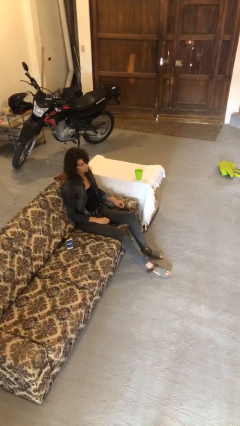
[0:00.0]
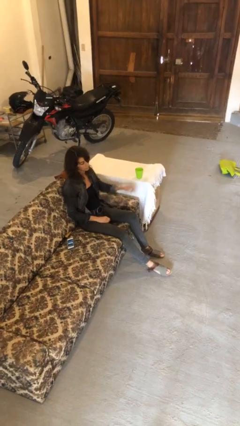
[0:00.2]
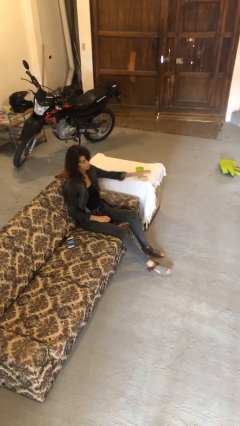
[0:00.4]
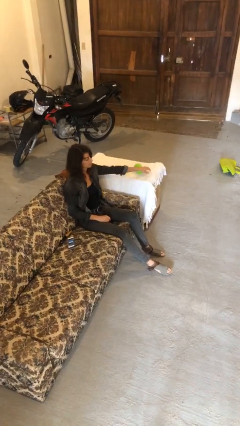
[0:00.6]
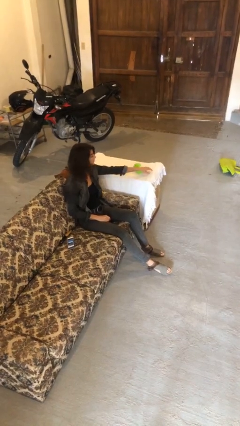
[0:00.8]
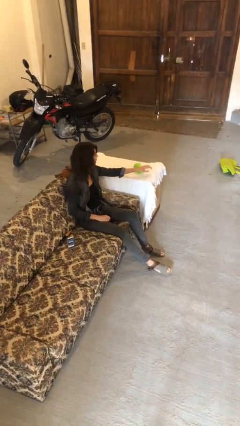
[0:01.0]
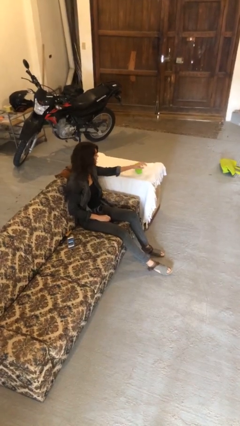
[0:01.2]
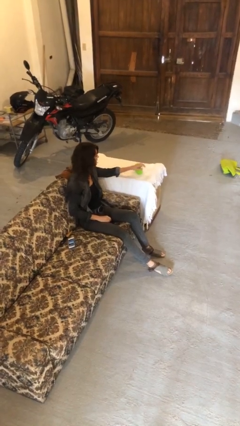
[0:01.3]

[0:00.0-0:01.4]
person knocks over glass

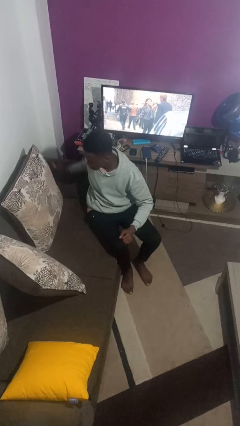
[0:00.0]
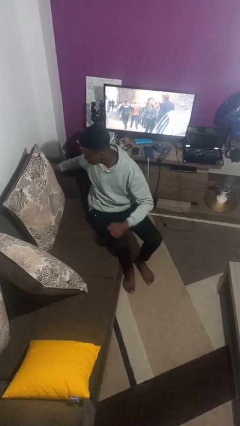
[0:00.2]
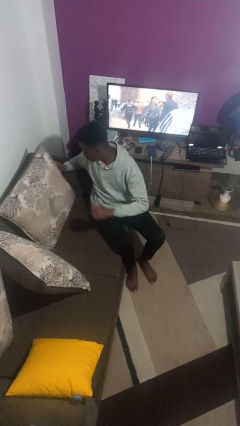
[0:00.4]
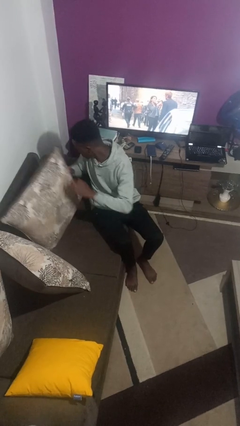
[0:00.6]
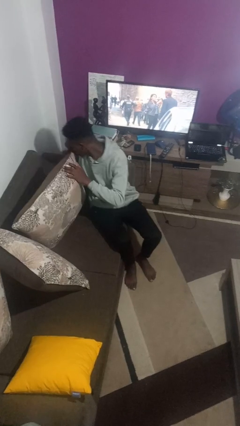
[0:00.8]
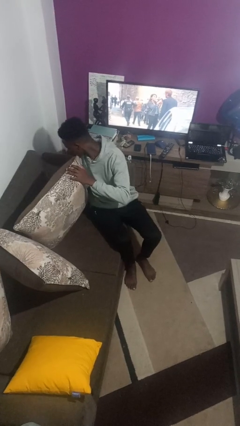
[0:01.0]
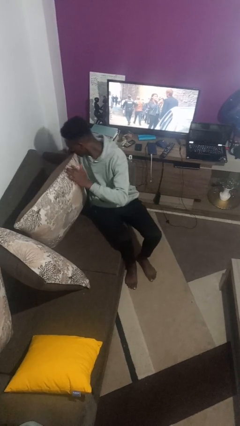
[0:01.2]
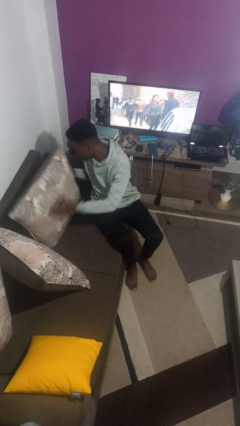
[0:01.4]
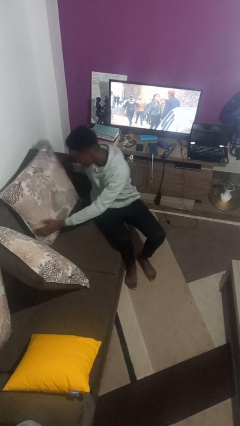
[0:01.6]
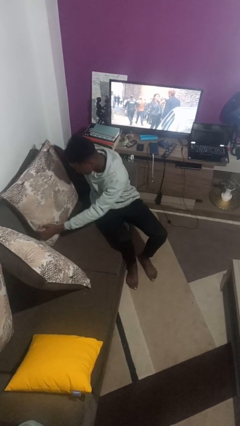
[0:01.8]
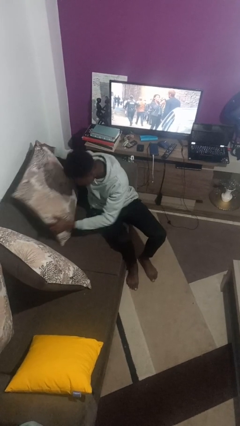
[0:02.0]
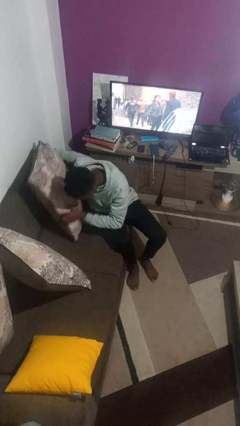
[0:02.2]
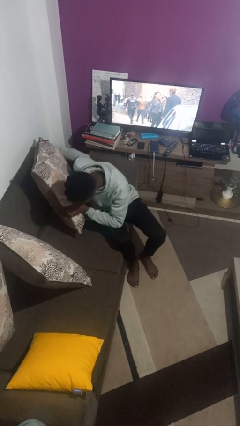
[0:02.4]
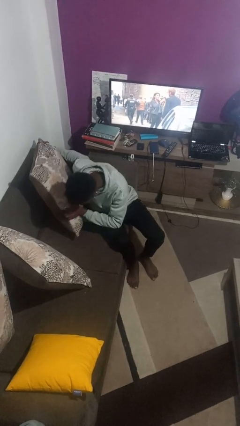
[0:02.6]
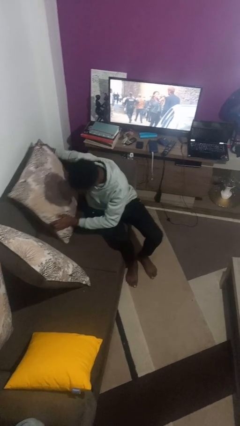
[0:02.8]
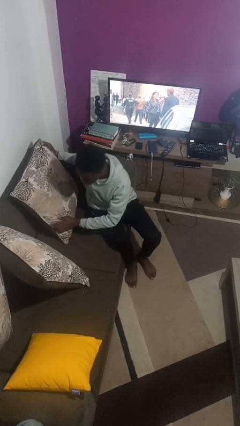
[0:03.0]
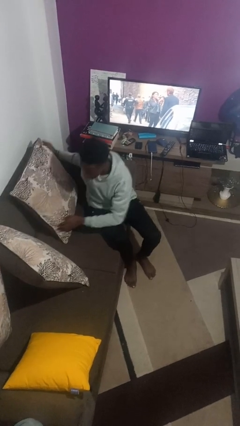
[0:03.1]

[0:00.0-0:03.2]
person searches in couch

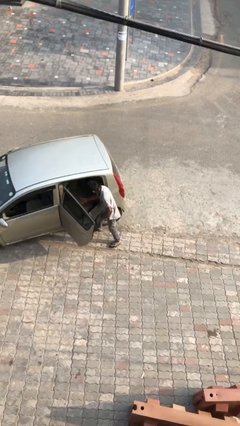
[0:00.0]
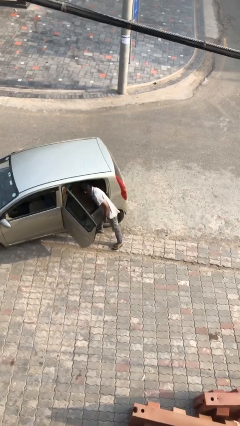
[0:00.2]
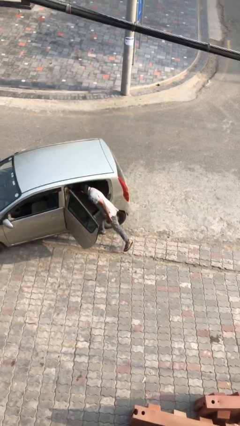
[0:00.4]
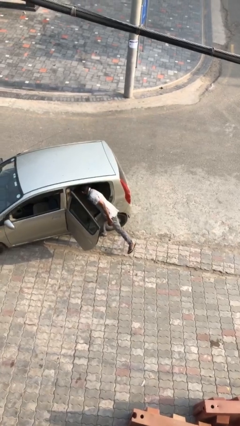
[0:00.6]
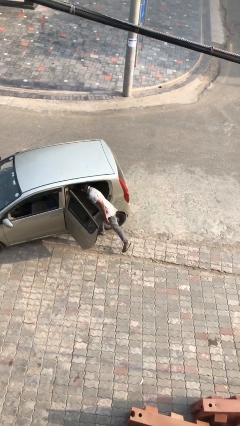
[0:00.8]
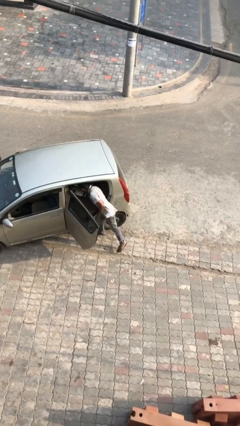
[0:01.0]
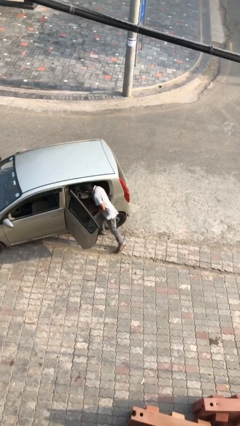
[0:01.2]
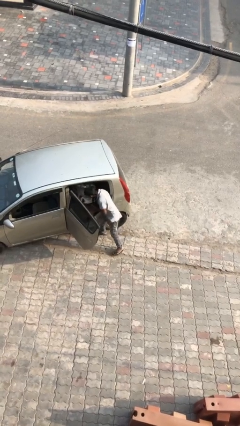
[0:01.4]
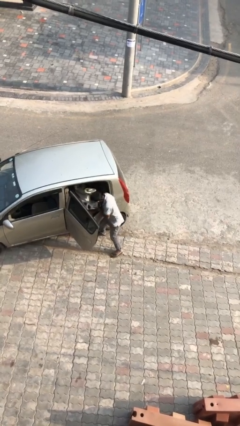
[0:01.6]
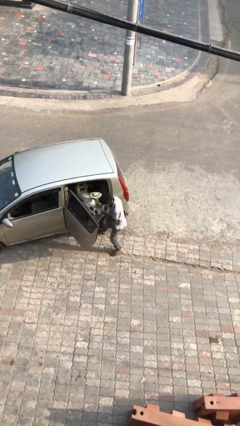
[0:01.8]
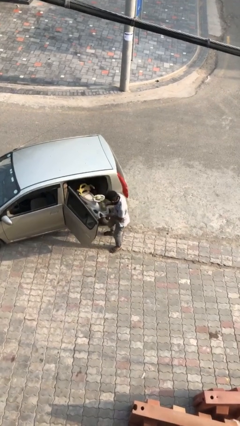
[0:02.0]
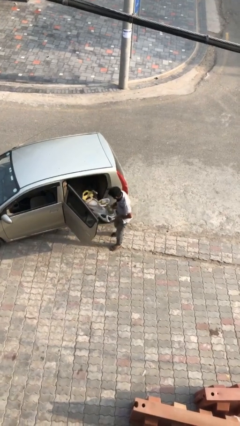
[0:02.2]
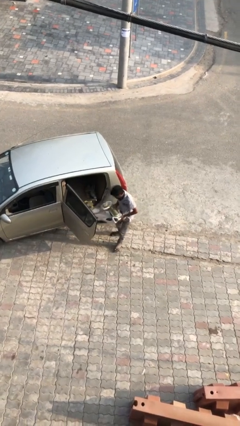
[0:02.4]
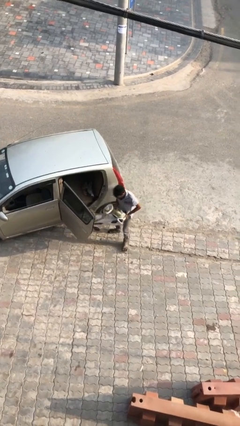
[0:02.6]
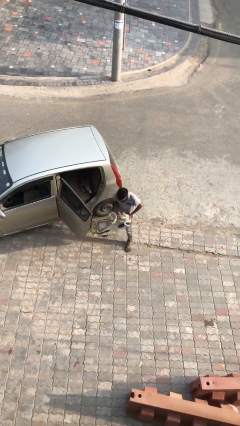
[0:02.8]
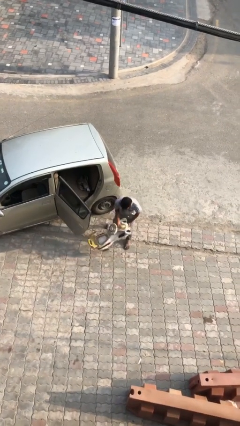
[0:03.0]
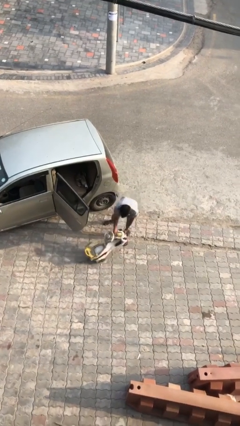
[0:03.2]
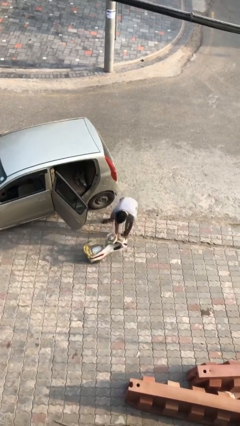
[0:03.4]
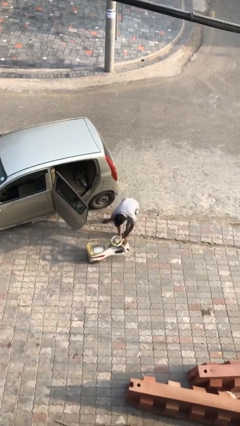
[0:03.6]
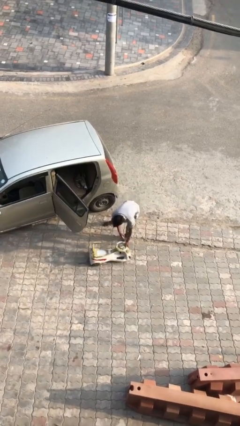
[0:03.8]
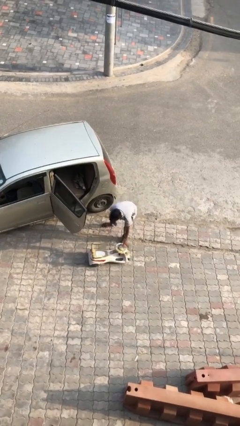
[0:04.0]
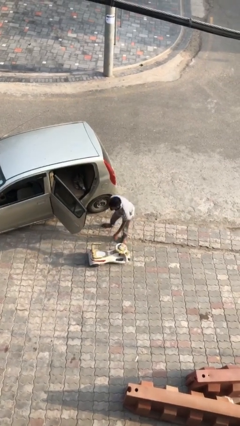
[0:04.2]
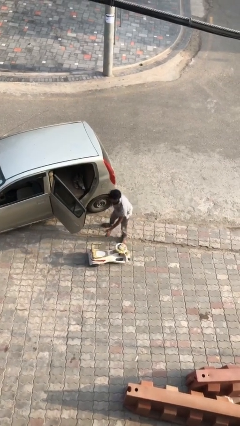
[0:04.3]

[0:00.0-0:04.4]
person unloads car

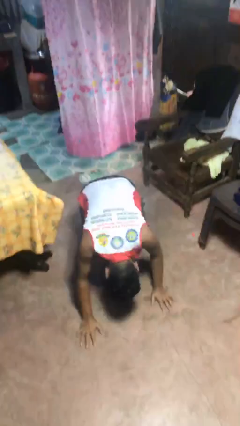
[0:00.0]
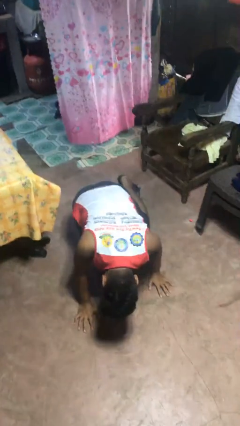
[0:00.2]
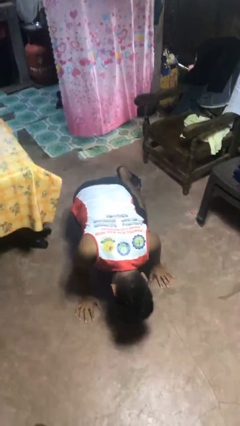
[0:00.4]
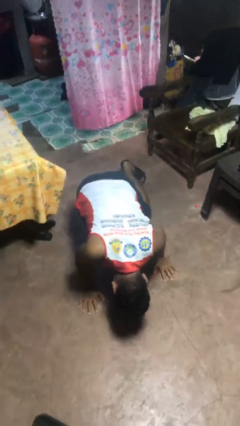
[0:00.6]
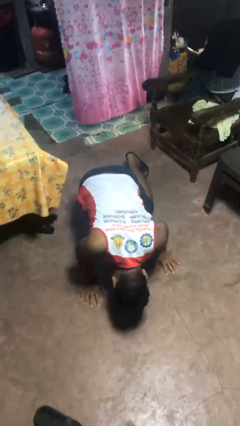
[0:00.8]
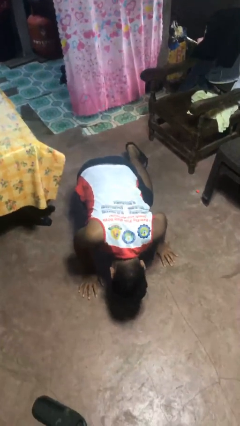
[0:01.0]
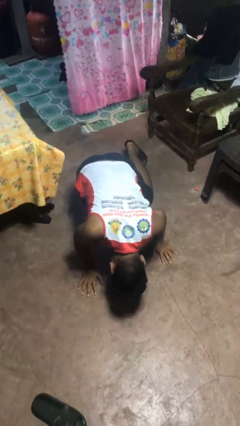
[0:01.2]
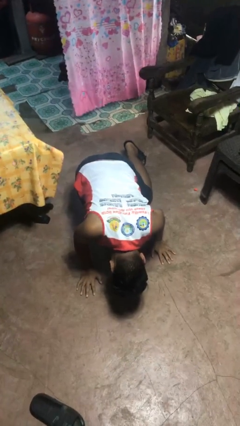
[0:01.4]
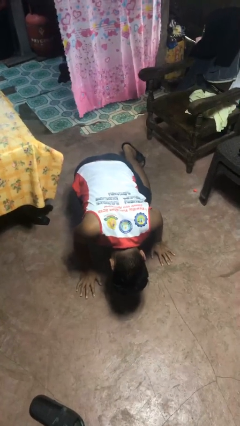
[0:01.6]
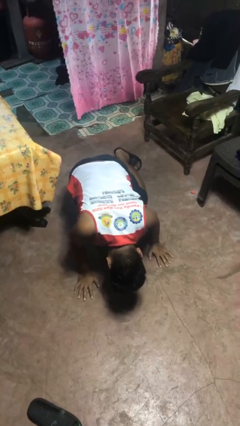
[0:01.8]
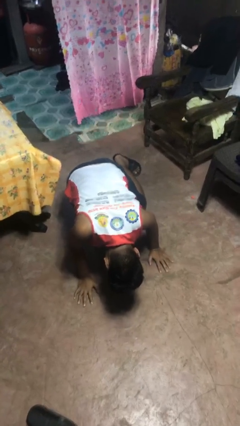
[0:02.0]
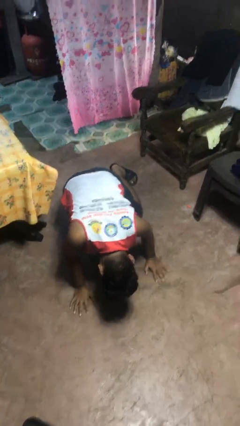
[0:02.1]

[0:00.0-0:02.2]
person lies down on floor

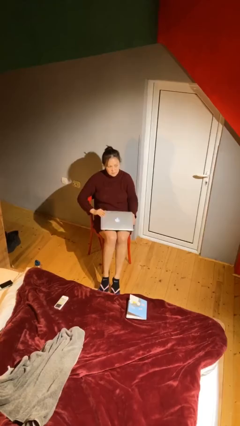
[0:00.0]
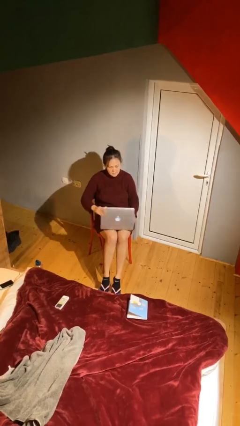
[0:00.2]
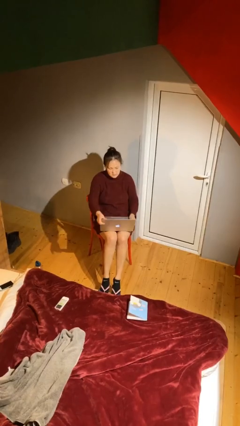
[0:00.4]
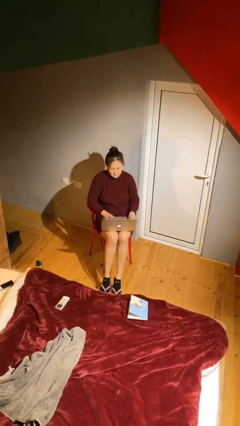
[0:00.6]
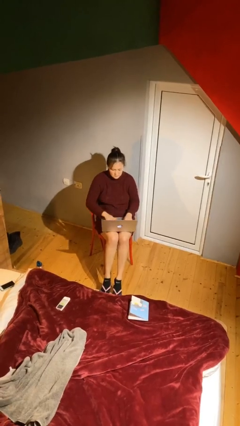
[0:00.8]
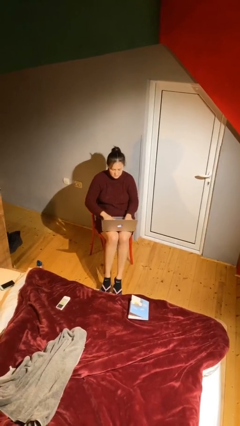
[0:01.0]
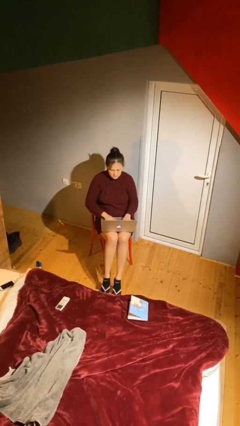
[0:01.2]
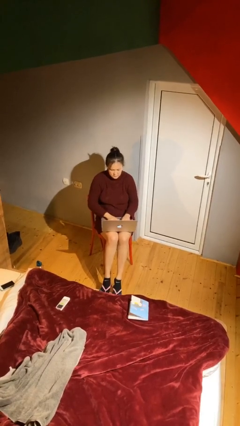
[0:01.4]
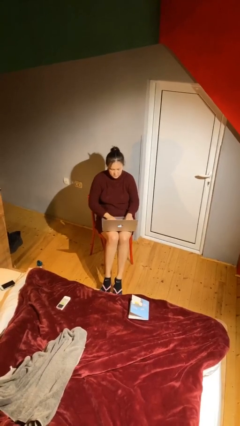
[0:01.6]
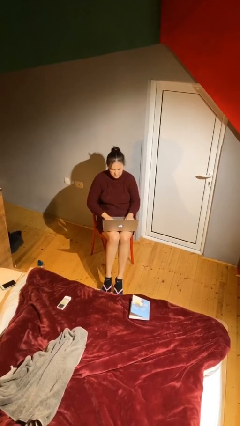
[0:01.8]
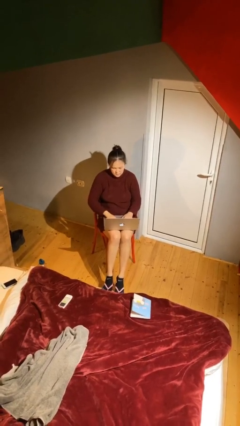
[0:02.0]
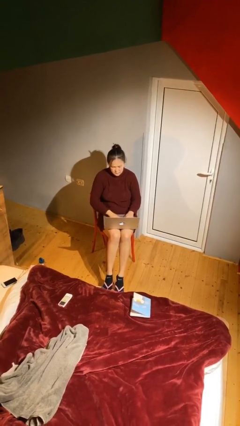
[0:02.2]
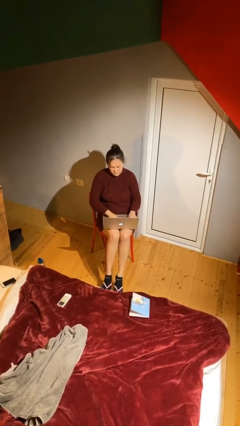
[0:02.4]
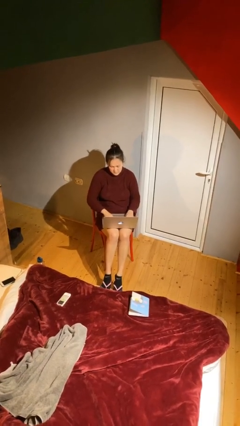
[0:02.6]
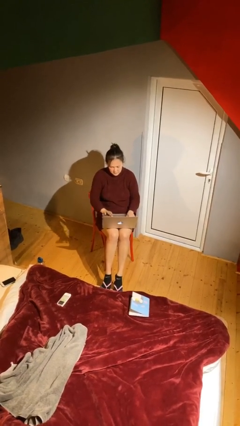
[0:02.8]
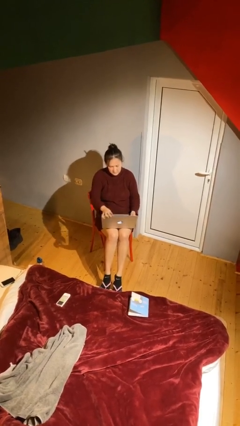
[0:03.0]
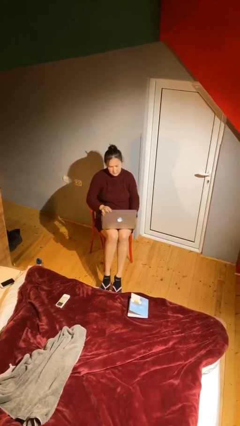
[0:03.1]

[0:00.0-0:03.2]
person interacts with laptop

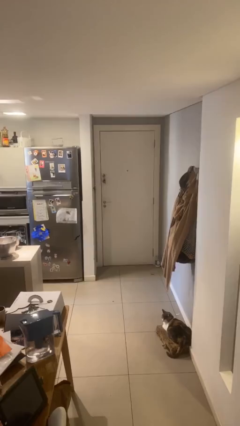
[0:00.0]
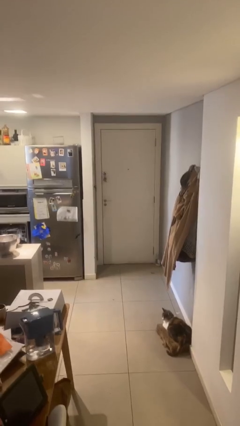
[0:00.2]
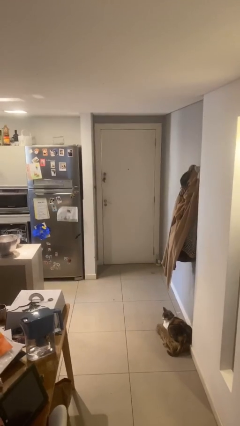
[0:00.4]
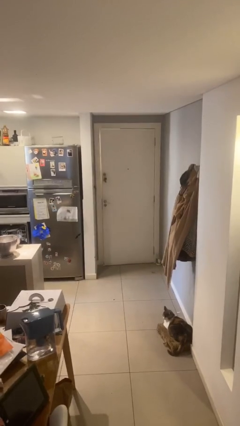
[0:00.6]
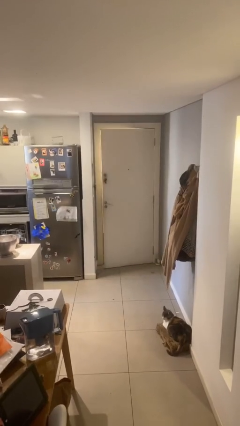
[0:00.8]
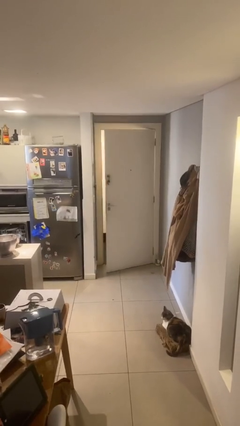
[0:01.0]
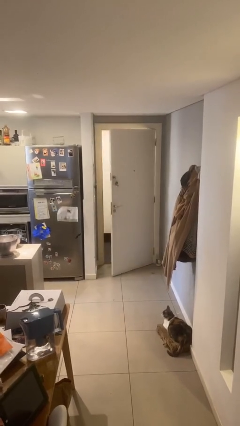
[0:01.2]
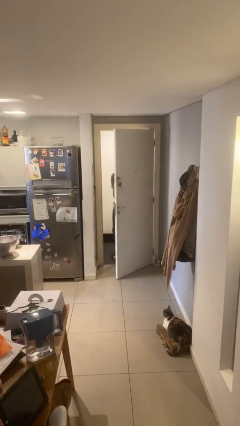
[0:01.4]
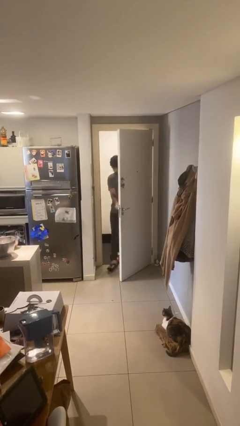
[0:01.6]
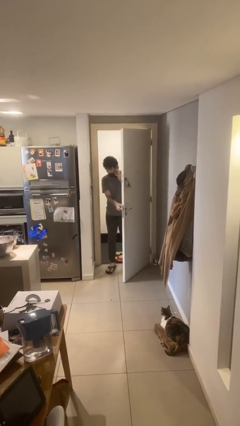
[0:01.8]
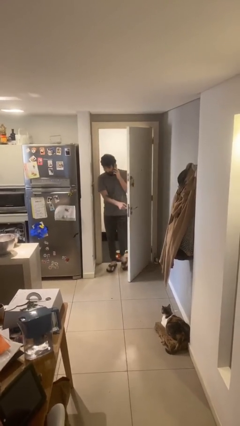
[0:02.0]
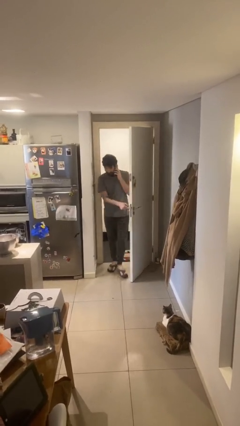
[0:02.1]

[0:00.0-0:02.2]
person opens facility door

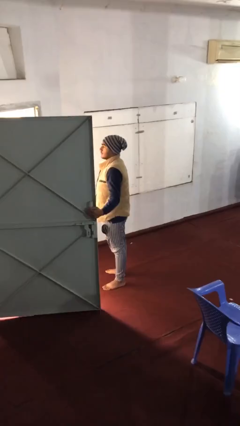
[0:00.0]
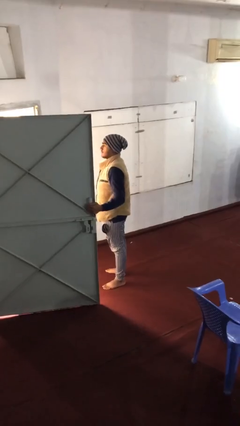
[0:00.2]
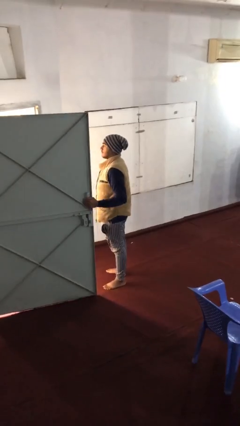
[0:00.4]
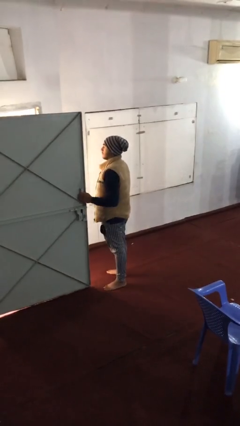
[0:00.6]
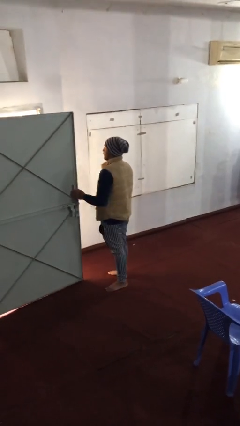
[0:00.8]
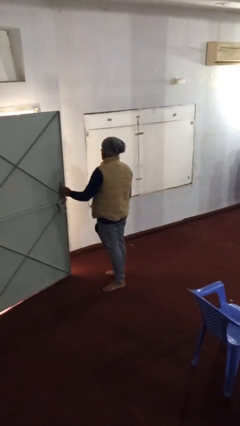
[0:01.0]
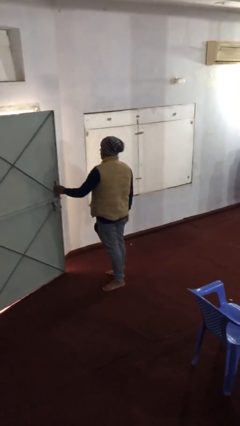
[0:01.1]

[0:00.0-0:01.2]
person closes facility door
